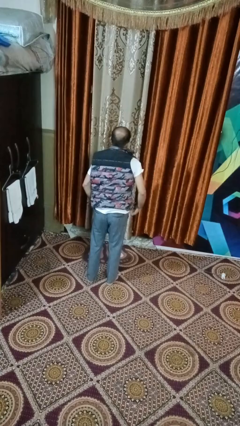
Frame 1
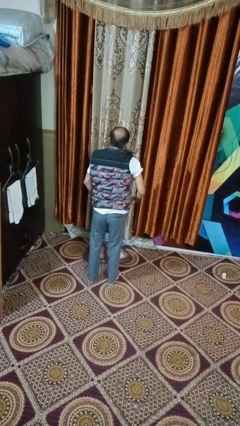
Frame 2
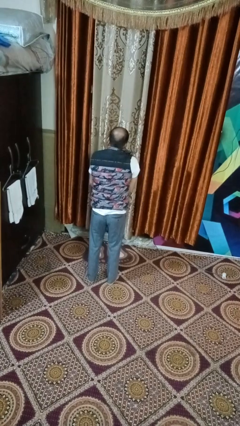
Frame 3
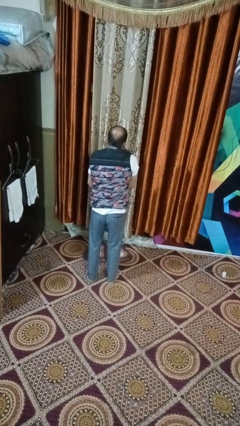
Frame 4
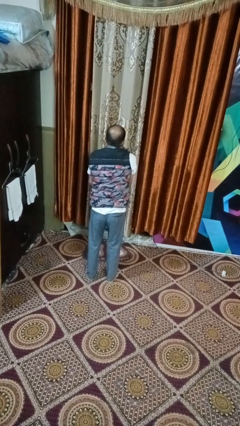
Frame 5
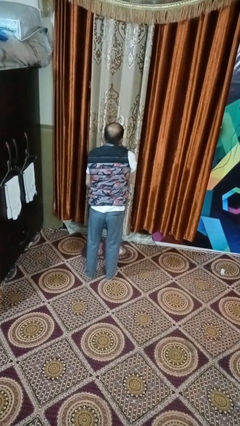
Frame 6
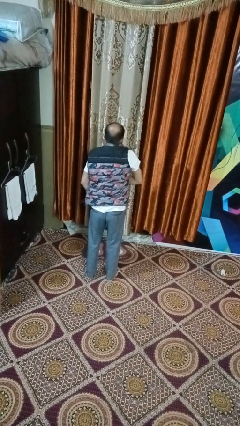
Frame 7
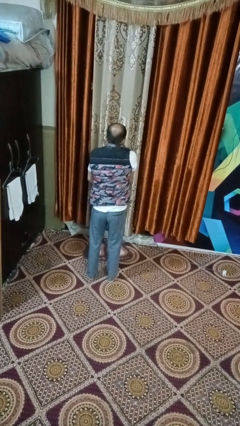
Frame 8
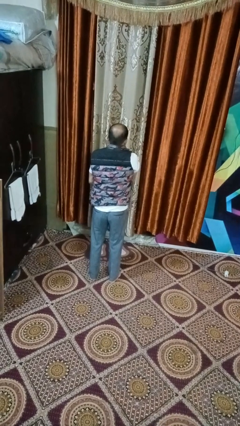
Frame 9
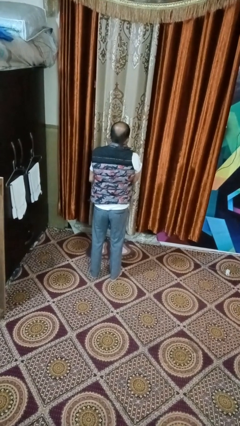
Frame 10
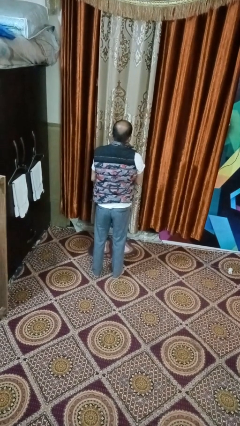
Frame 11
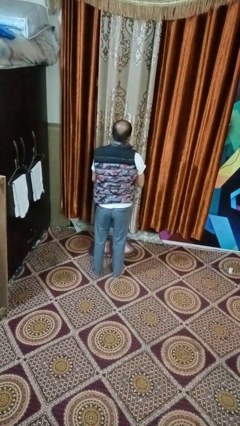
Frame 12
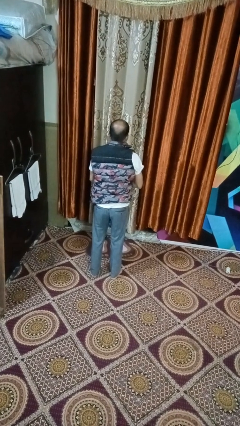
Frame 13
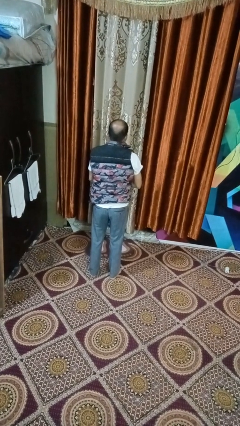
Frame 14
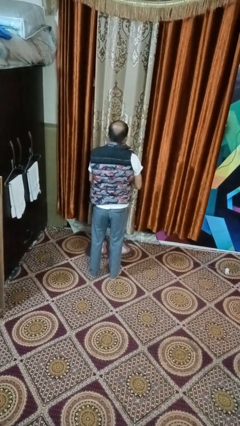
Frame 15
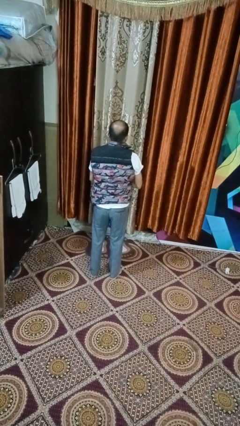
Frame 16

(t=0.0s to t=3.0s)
person zips up jacket

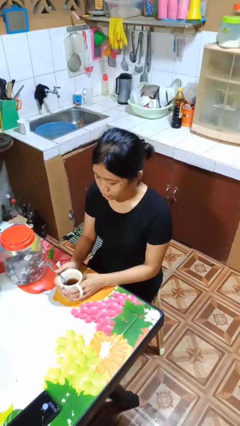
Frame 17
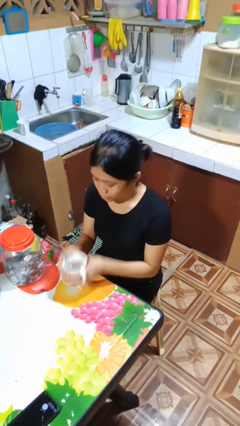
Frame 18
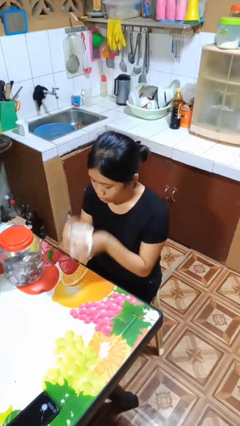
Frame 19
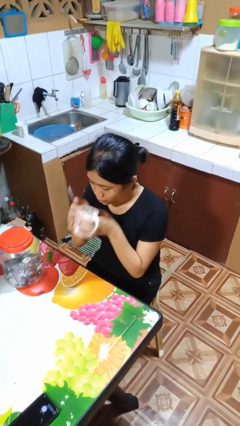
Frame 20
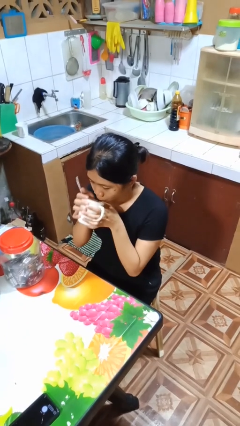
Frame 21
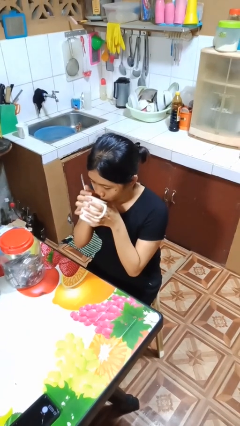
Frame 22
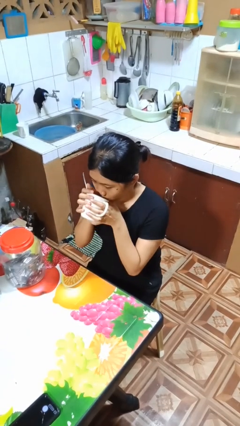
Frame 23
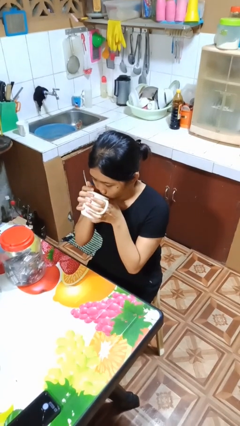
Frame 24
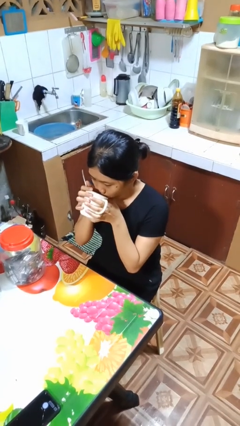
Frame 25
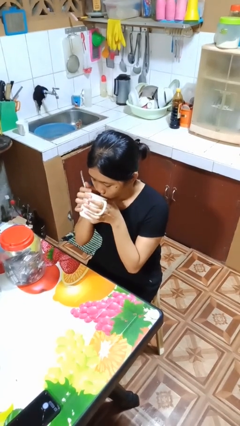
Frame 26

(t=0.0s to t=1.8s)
person drinks from mug

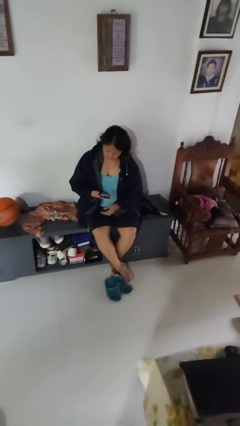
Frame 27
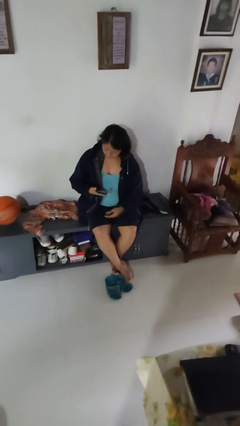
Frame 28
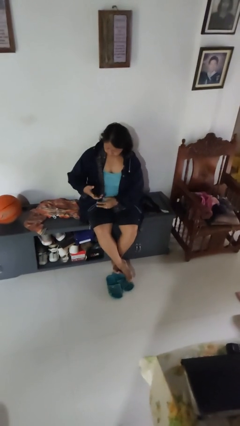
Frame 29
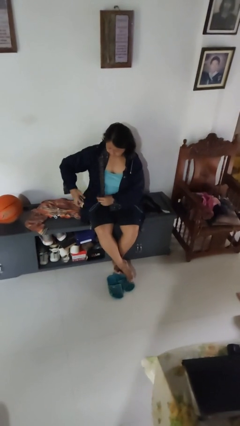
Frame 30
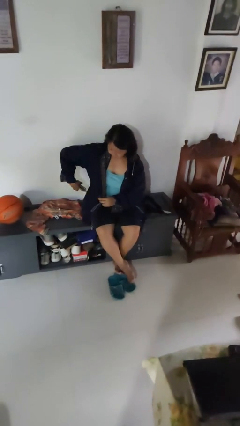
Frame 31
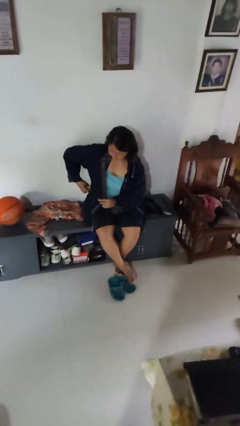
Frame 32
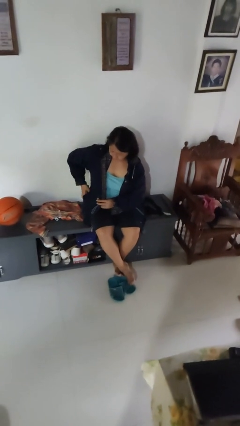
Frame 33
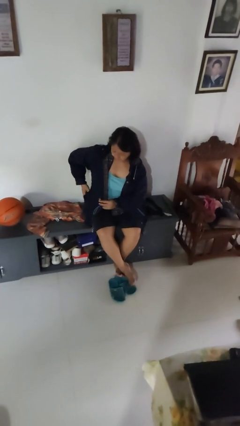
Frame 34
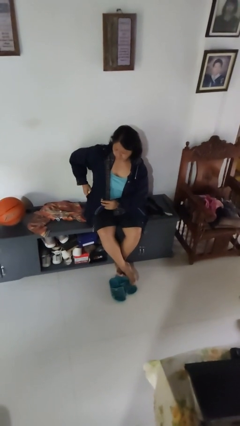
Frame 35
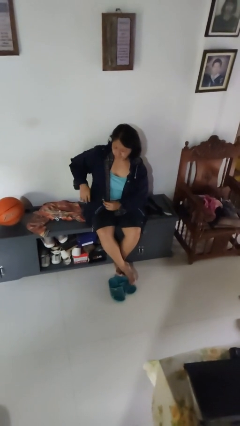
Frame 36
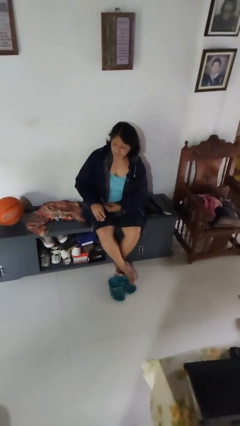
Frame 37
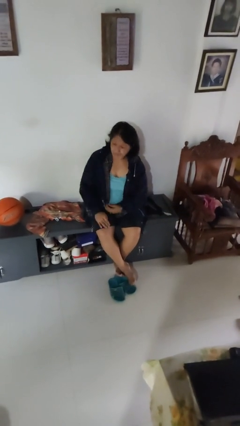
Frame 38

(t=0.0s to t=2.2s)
person puts phone into pocket

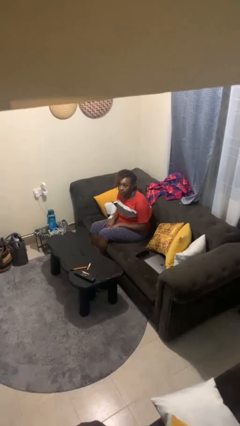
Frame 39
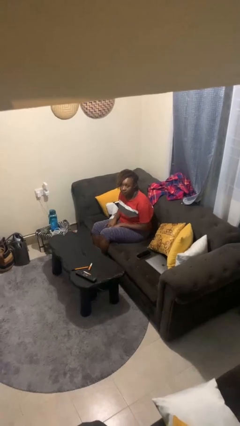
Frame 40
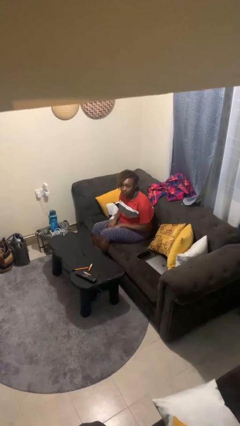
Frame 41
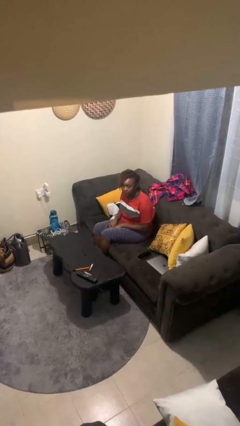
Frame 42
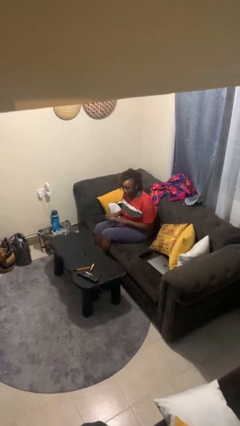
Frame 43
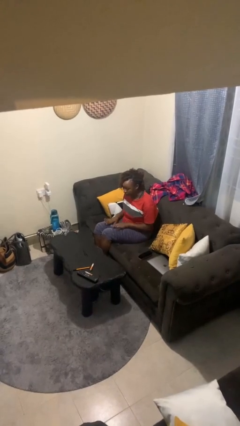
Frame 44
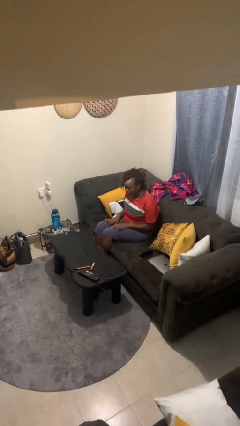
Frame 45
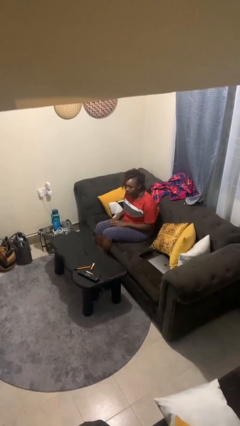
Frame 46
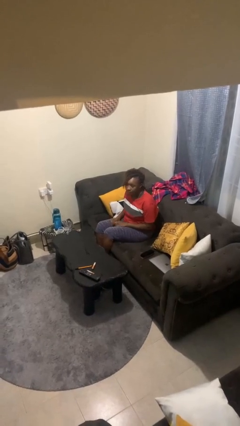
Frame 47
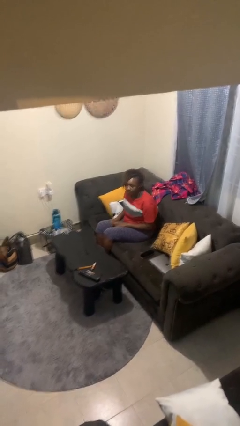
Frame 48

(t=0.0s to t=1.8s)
person slaps hands on thighs

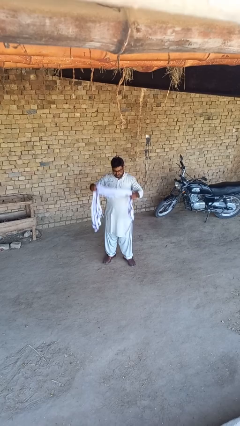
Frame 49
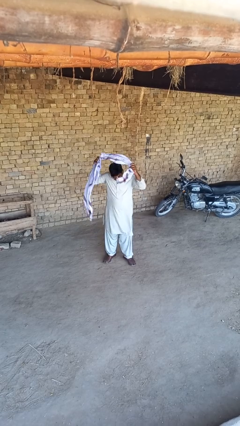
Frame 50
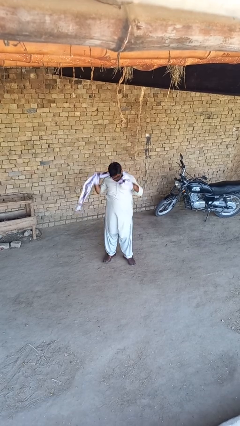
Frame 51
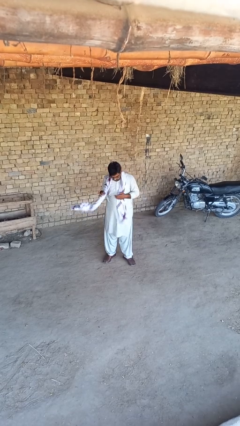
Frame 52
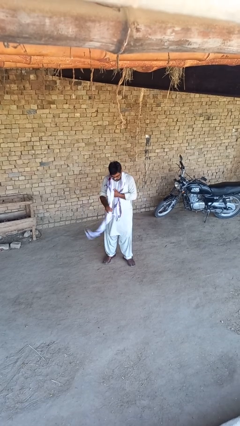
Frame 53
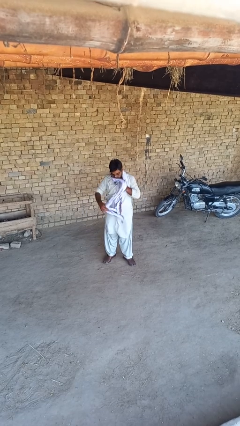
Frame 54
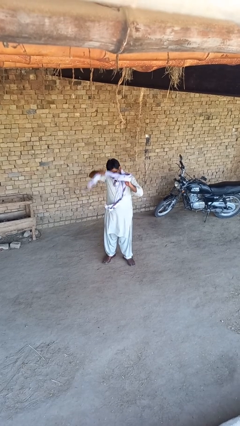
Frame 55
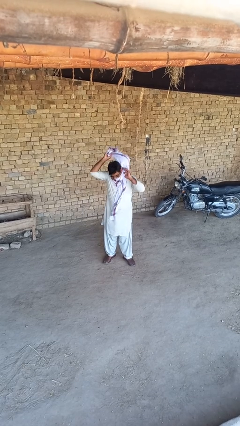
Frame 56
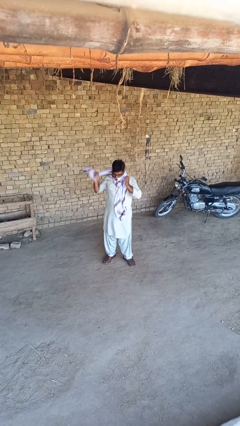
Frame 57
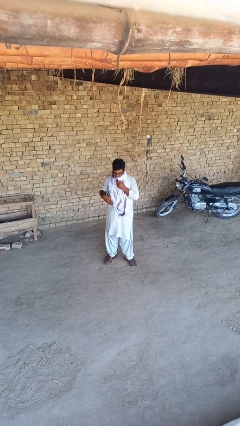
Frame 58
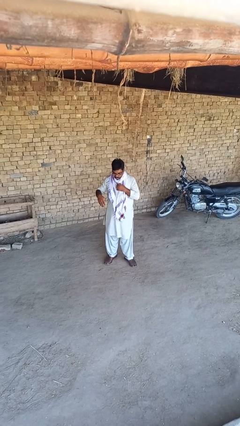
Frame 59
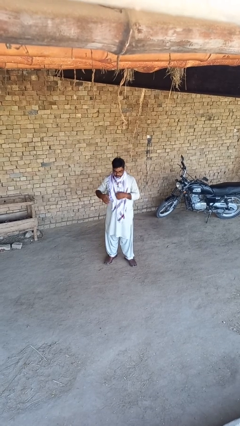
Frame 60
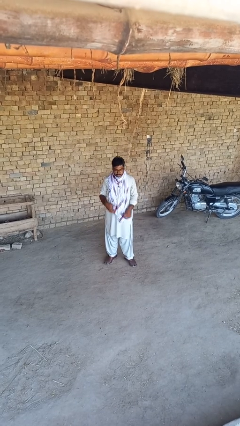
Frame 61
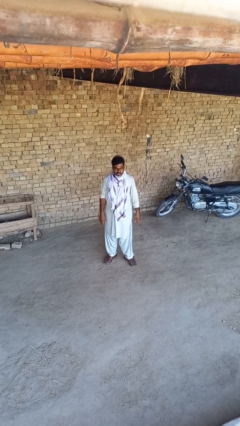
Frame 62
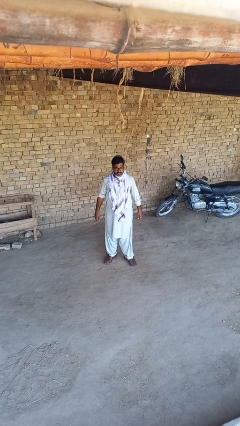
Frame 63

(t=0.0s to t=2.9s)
person puts on scarf

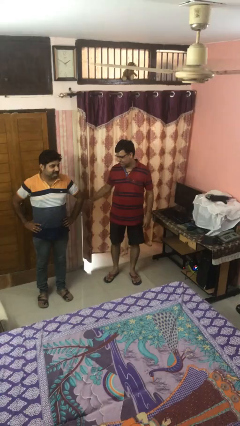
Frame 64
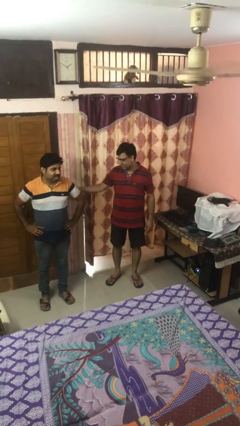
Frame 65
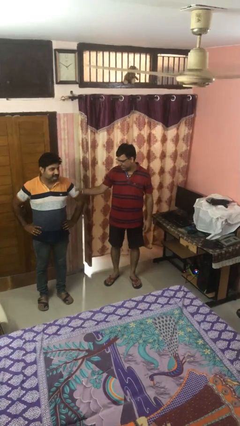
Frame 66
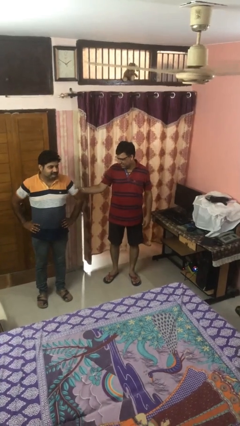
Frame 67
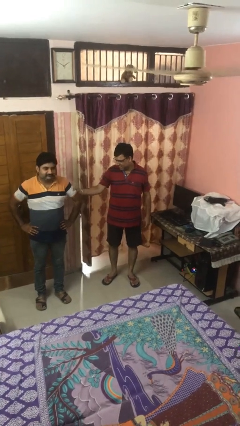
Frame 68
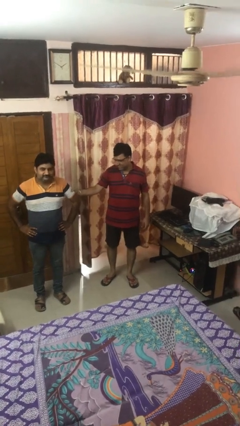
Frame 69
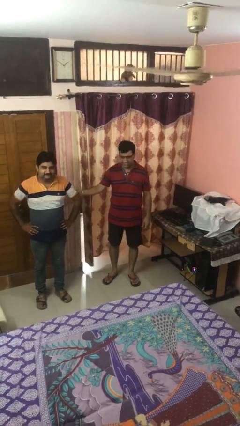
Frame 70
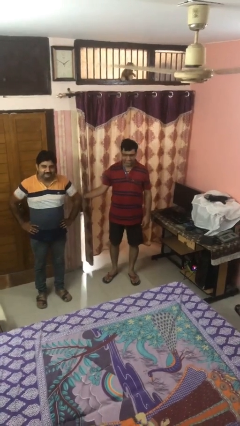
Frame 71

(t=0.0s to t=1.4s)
person grabs person by bicep

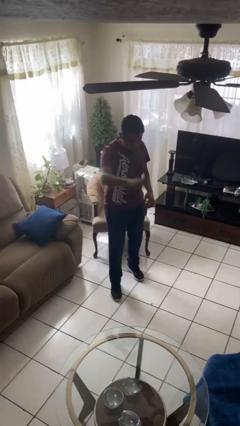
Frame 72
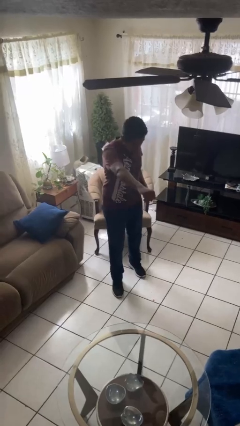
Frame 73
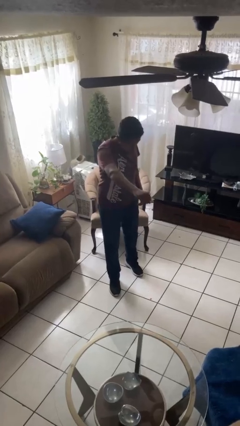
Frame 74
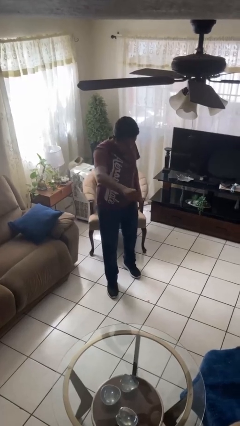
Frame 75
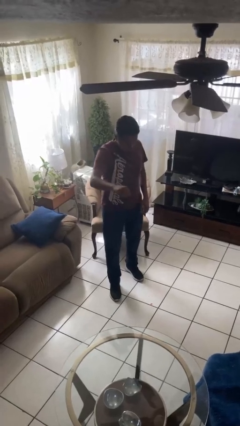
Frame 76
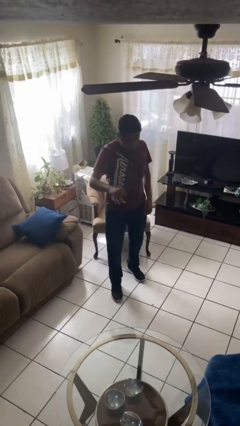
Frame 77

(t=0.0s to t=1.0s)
person punches

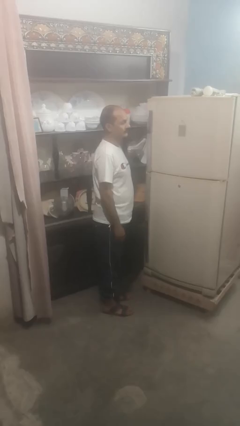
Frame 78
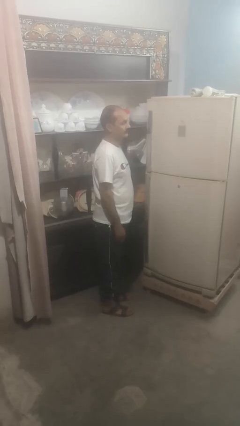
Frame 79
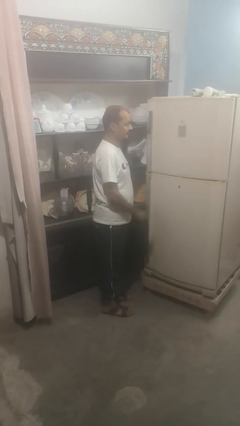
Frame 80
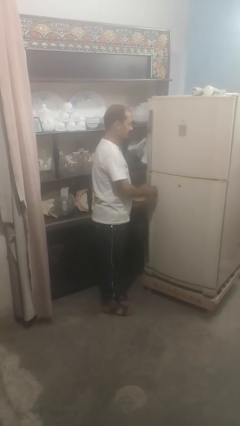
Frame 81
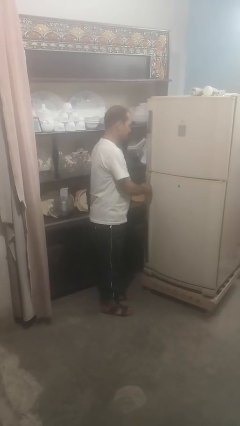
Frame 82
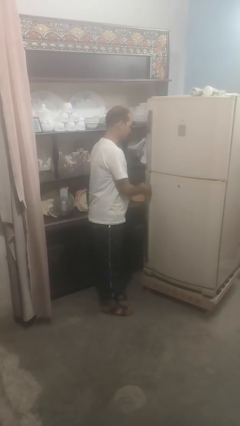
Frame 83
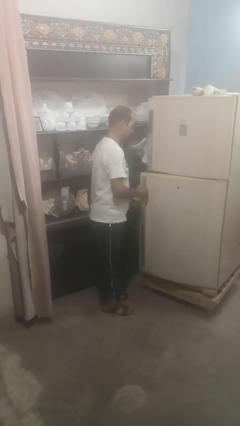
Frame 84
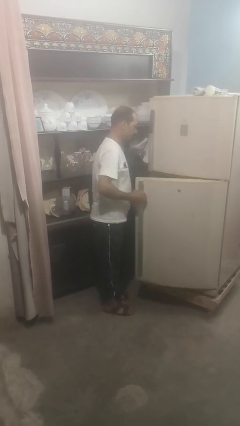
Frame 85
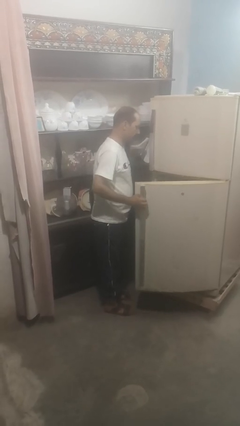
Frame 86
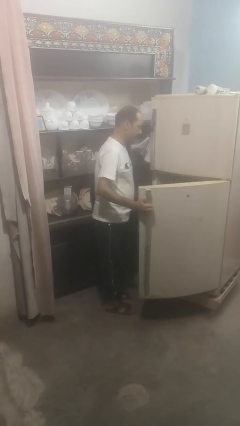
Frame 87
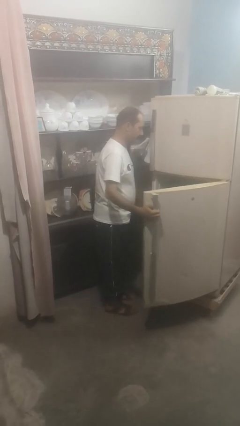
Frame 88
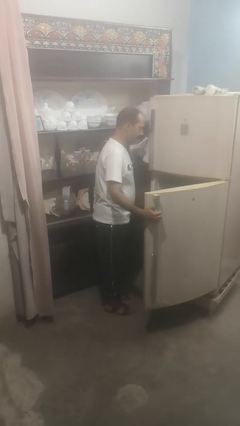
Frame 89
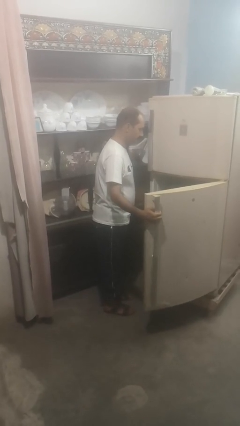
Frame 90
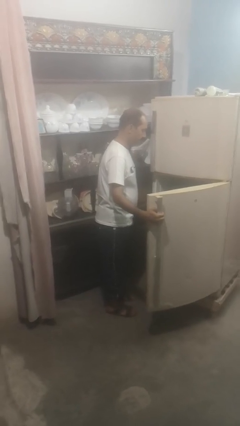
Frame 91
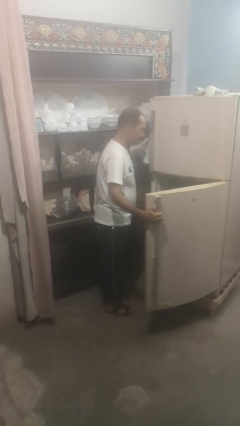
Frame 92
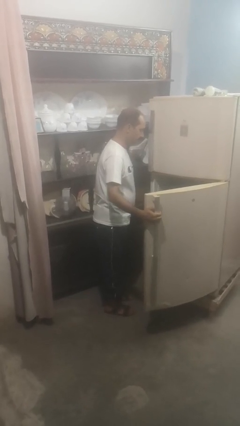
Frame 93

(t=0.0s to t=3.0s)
person opens refrigerator
